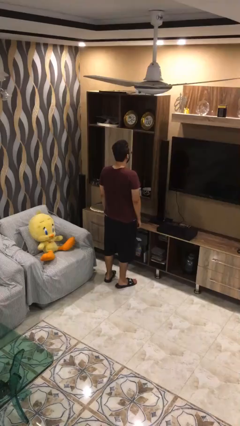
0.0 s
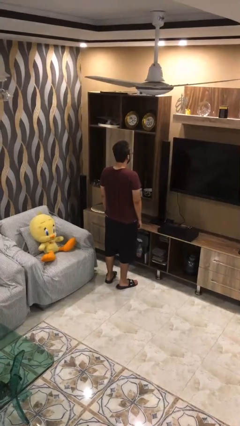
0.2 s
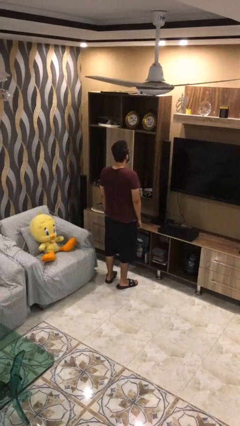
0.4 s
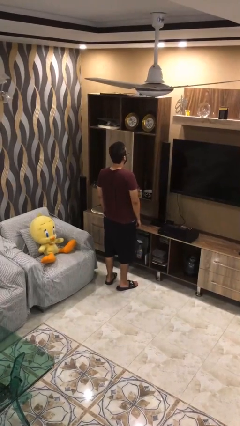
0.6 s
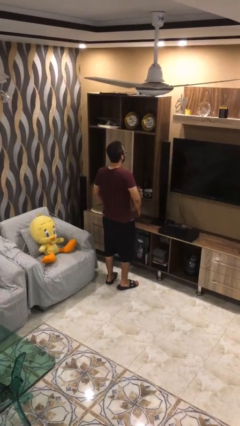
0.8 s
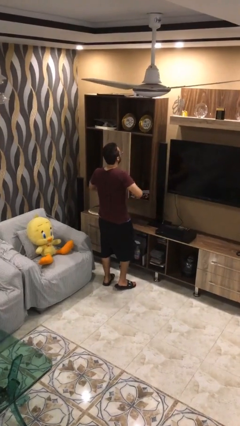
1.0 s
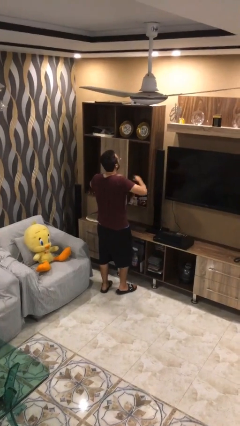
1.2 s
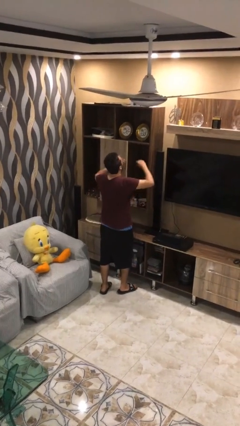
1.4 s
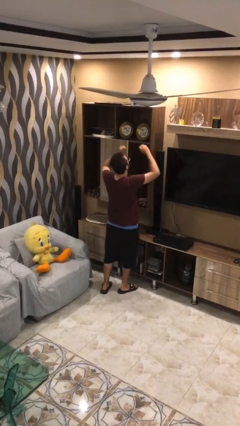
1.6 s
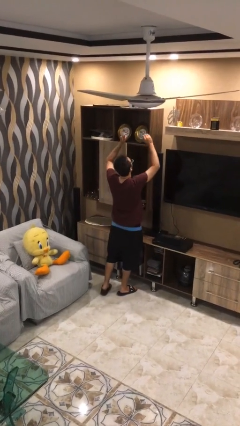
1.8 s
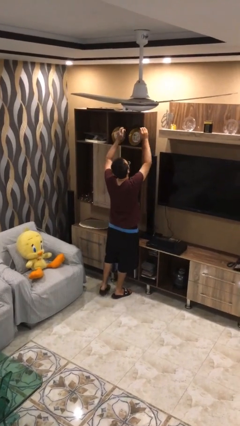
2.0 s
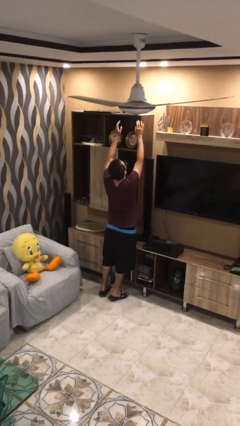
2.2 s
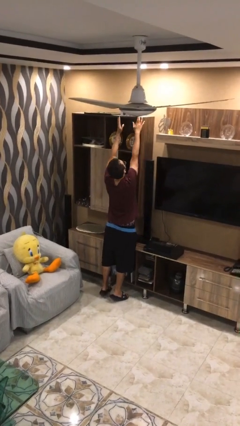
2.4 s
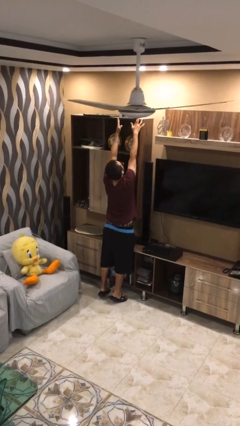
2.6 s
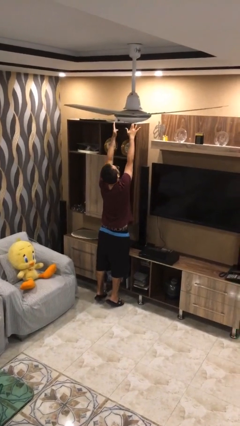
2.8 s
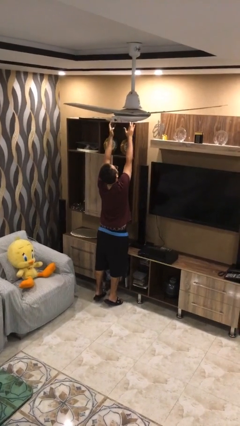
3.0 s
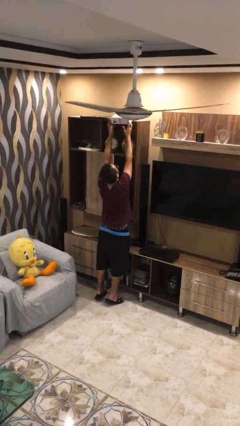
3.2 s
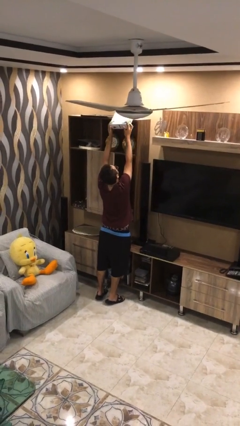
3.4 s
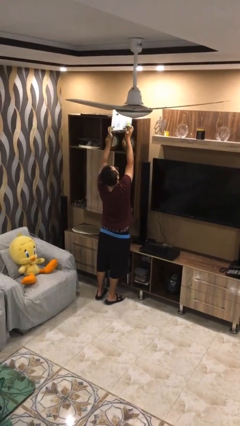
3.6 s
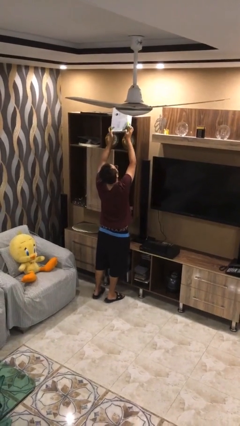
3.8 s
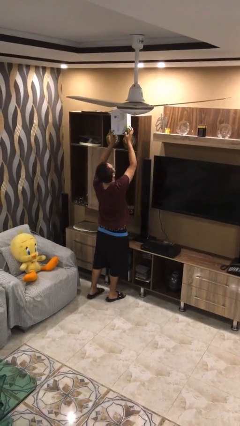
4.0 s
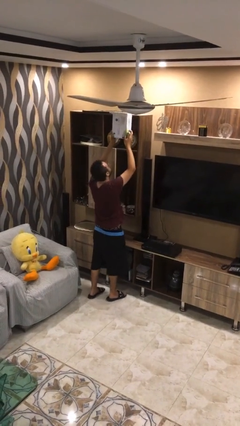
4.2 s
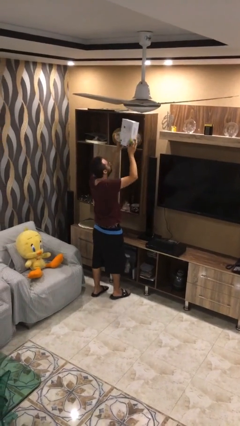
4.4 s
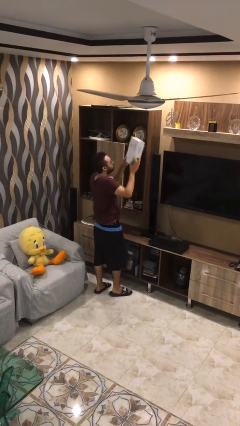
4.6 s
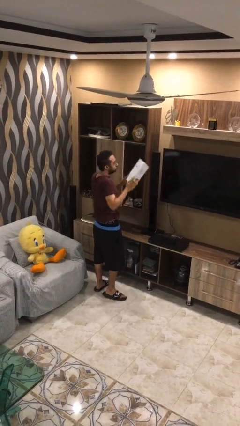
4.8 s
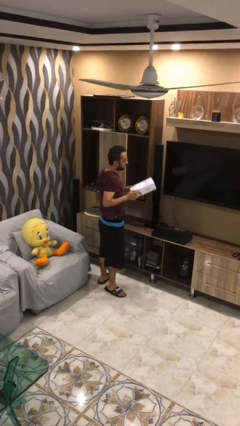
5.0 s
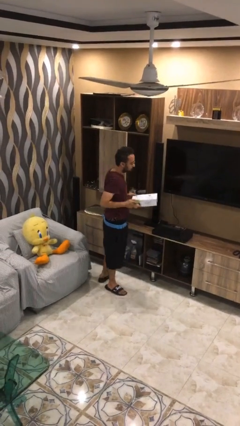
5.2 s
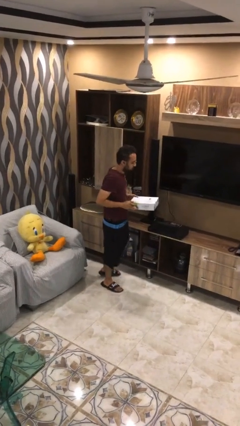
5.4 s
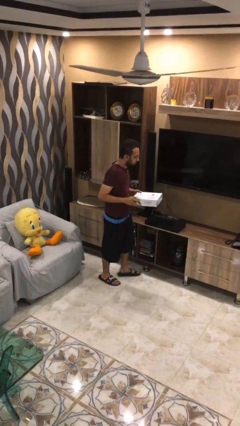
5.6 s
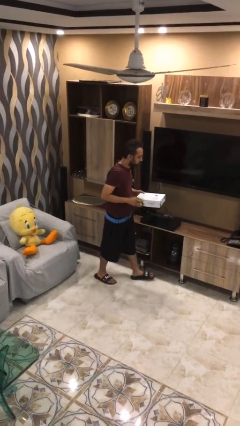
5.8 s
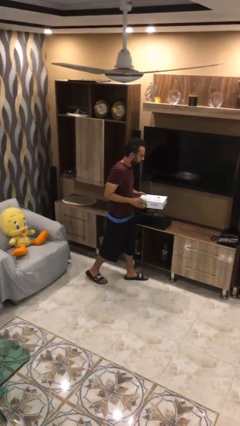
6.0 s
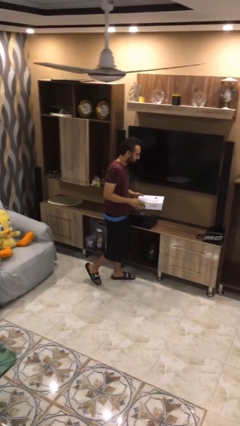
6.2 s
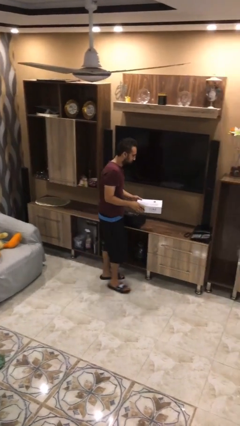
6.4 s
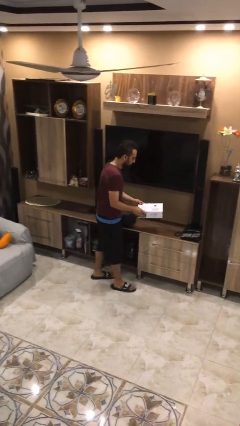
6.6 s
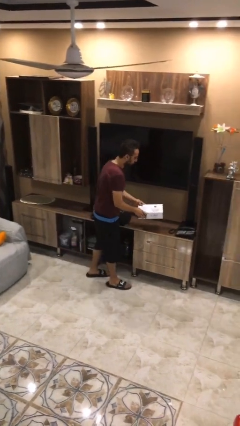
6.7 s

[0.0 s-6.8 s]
person picks up object from shelf

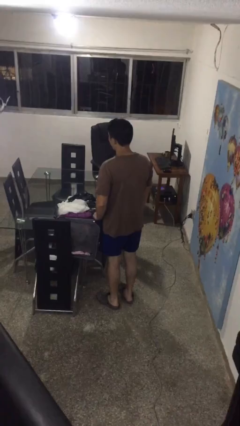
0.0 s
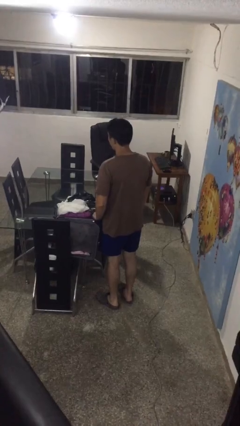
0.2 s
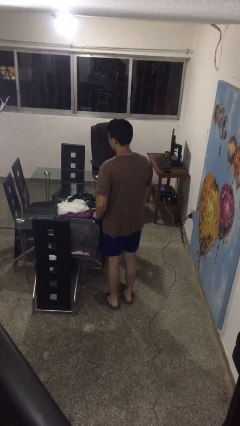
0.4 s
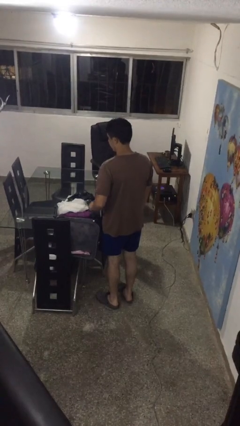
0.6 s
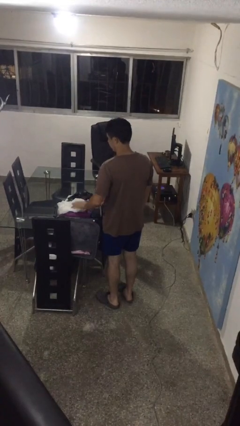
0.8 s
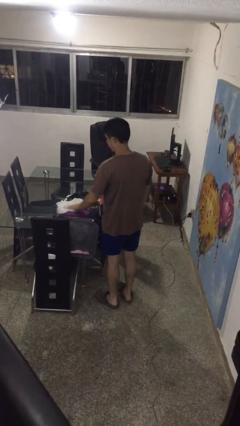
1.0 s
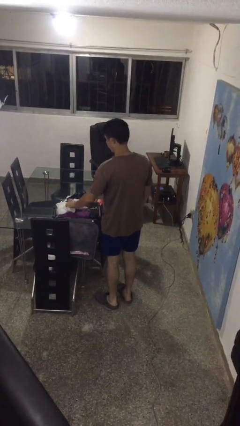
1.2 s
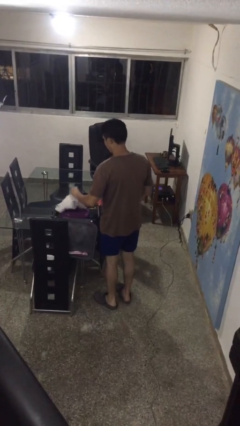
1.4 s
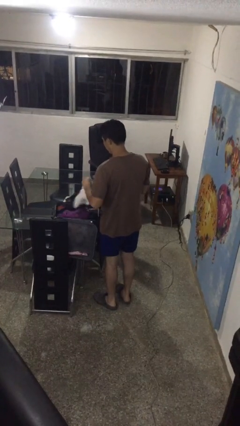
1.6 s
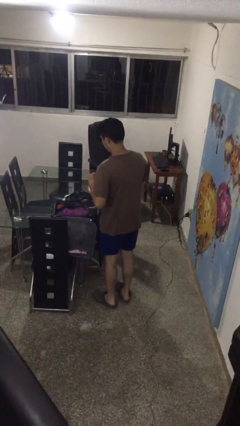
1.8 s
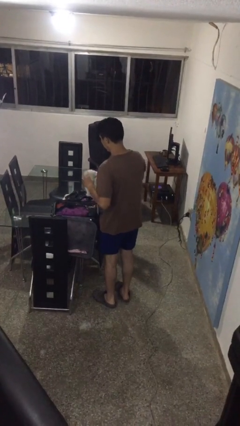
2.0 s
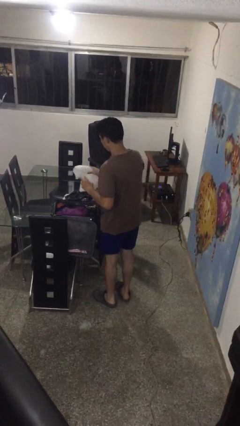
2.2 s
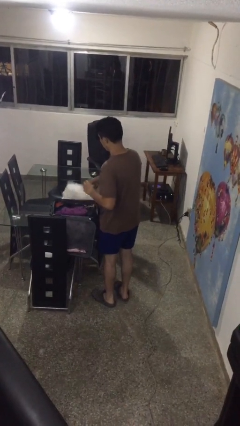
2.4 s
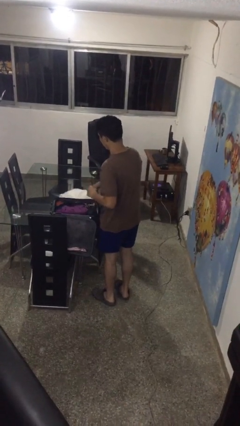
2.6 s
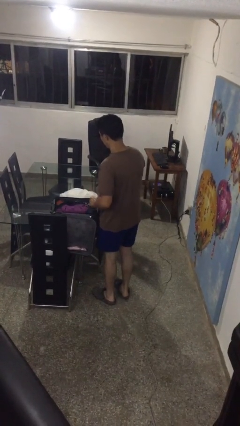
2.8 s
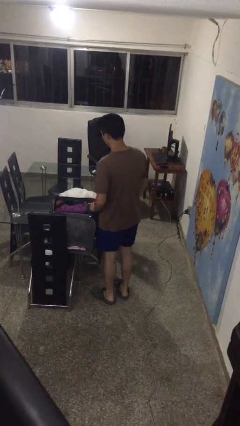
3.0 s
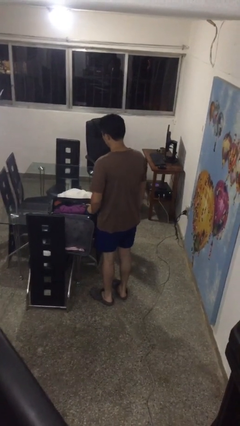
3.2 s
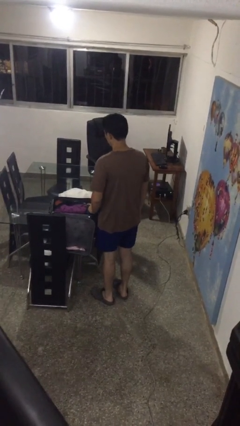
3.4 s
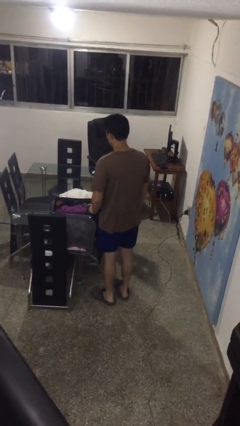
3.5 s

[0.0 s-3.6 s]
person unloads clothes from suitcase

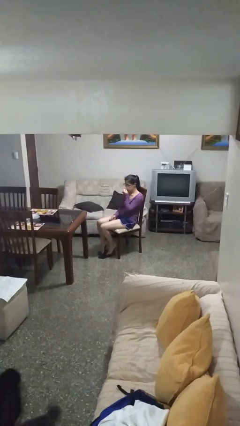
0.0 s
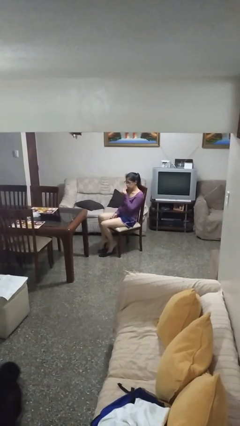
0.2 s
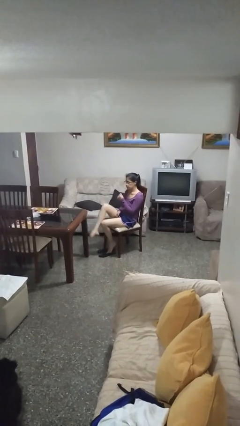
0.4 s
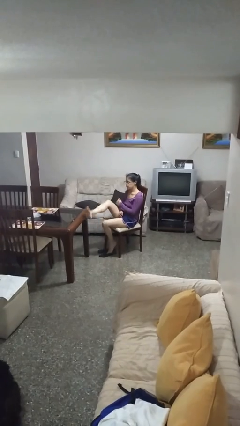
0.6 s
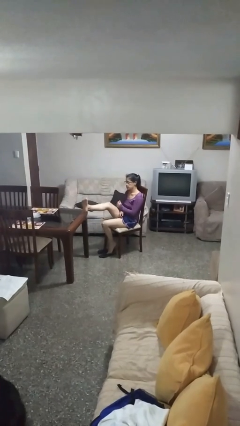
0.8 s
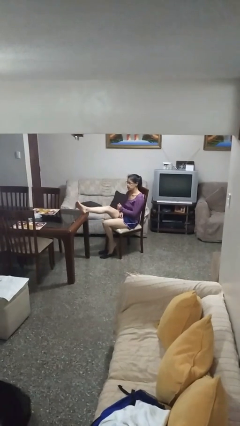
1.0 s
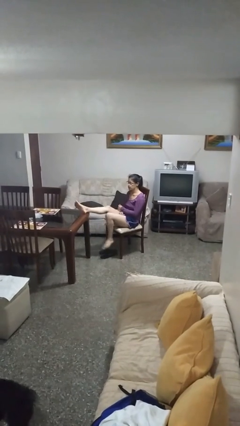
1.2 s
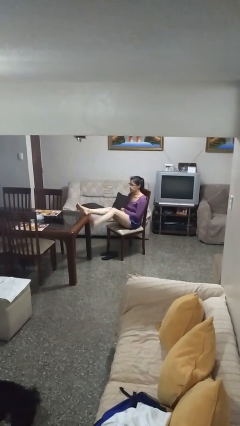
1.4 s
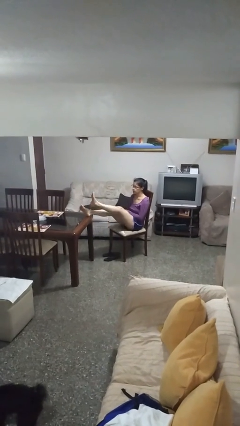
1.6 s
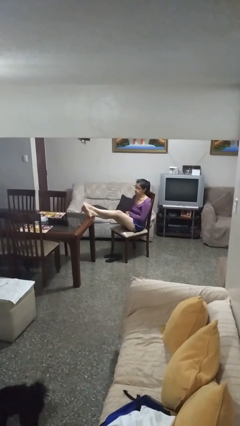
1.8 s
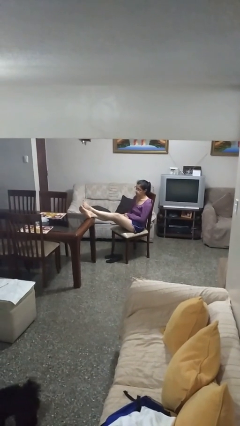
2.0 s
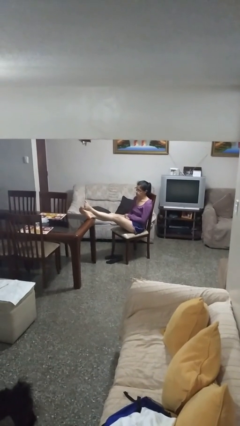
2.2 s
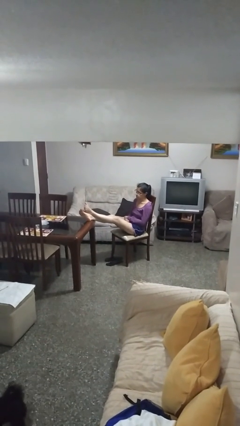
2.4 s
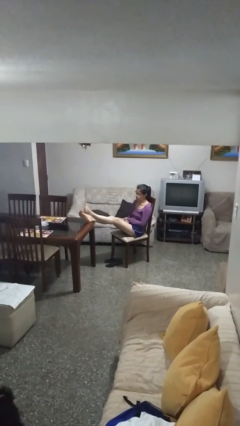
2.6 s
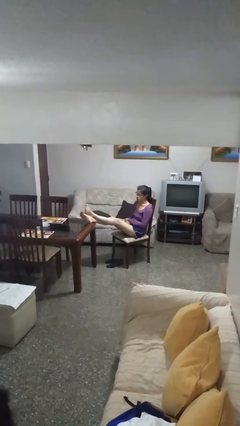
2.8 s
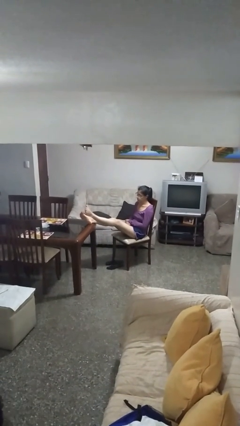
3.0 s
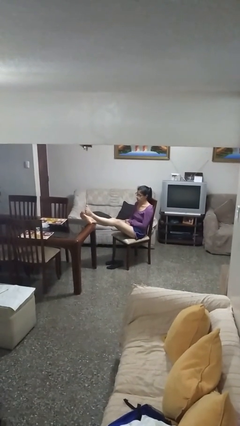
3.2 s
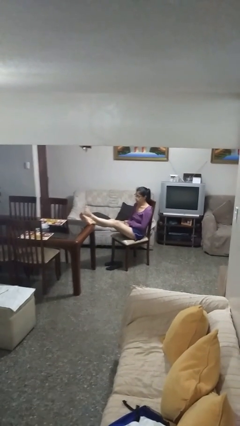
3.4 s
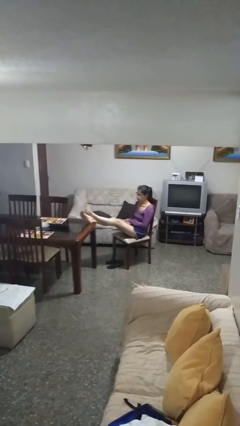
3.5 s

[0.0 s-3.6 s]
person puts feet up

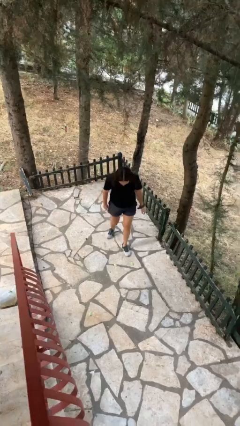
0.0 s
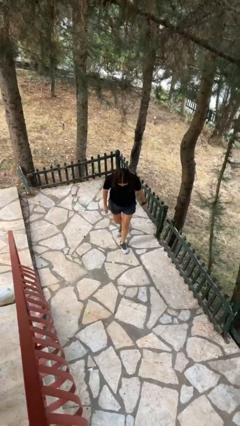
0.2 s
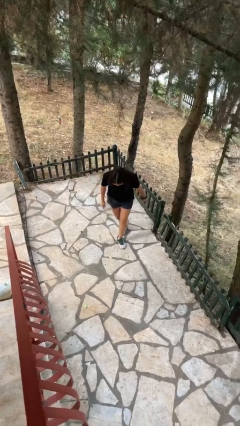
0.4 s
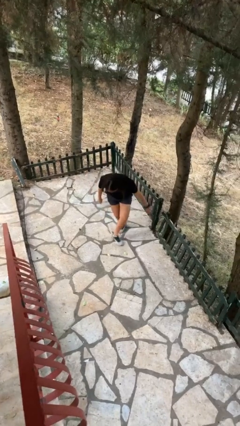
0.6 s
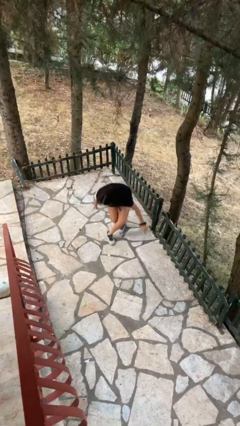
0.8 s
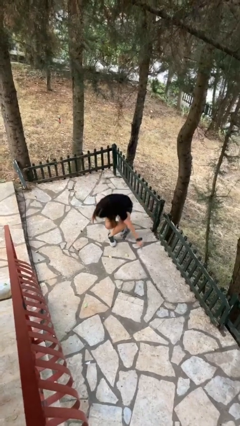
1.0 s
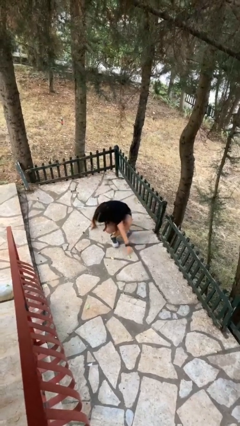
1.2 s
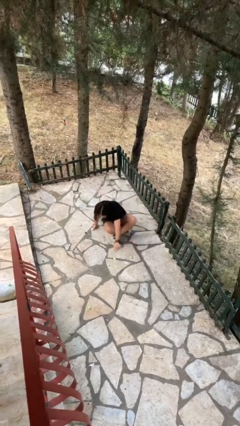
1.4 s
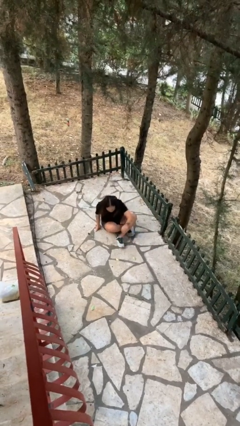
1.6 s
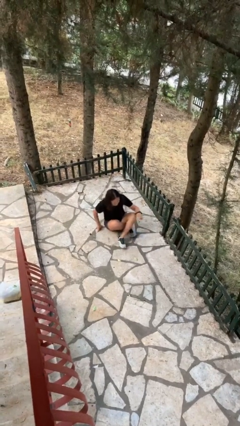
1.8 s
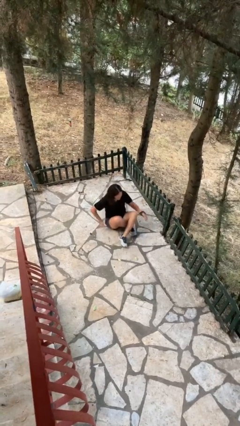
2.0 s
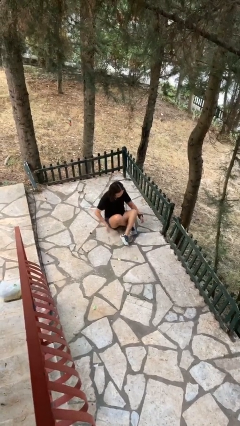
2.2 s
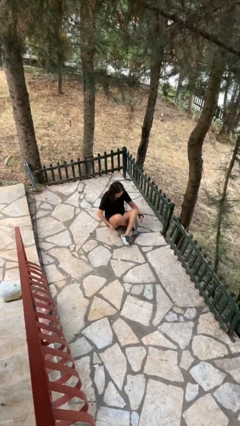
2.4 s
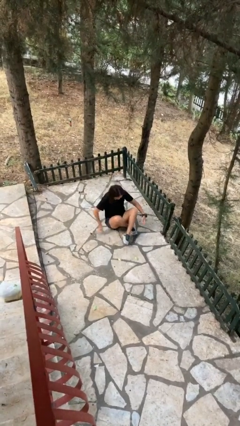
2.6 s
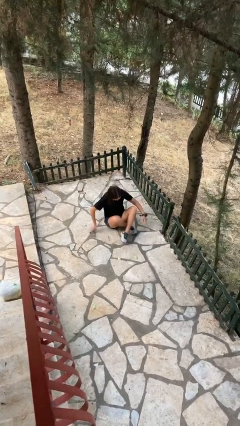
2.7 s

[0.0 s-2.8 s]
person sits crisscross

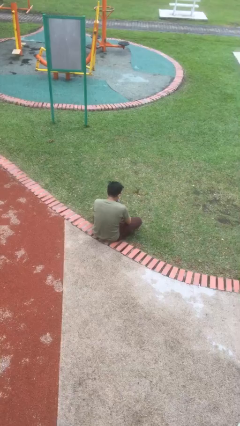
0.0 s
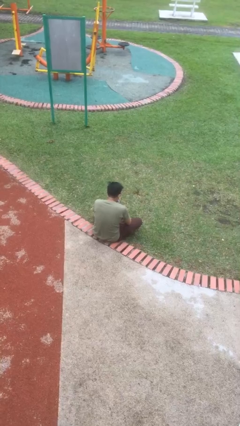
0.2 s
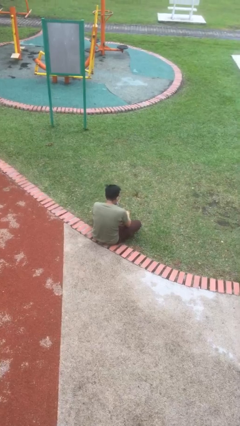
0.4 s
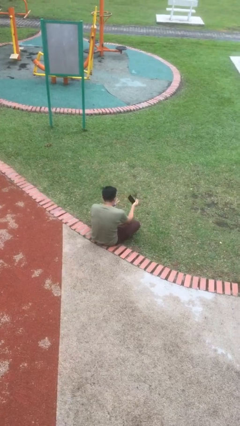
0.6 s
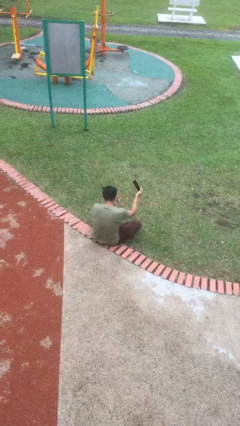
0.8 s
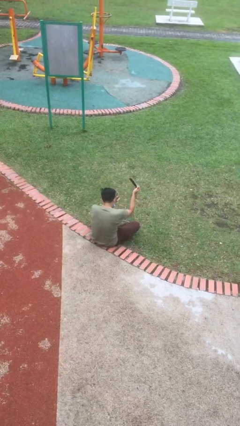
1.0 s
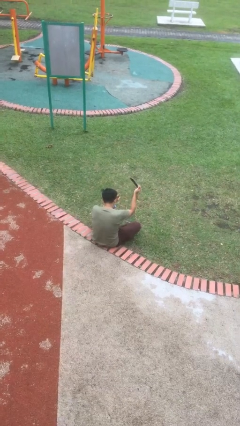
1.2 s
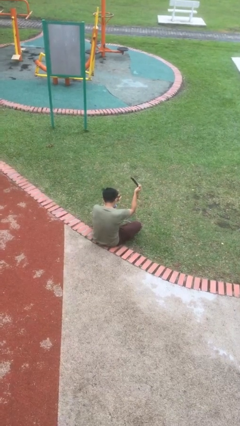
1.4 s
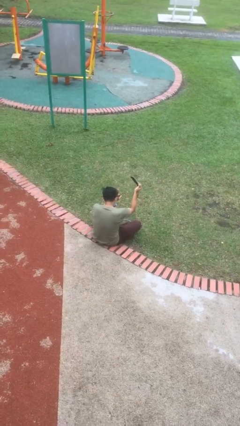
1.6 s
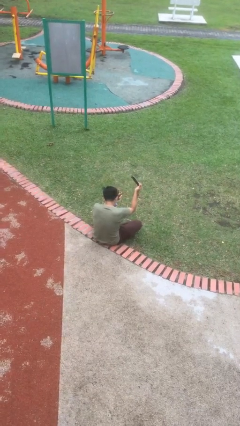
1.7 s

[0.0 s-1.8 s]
person takes selfie
